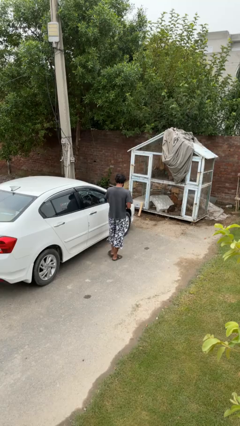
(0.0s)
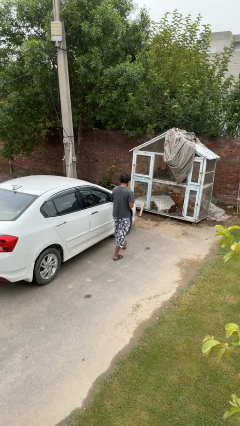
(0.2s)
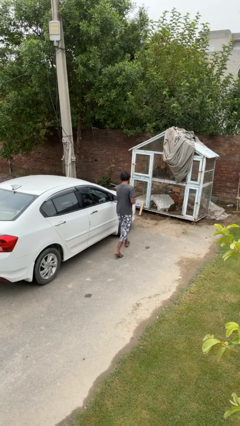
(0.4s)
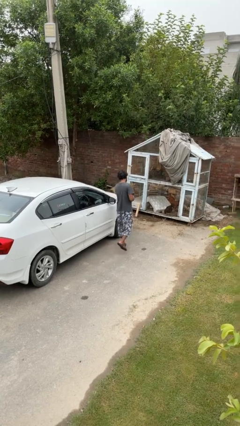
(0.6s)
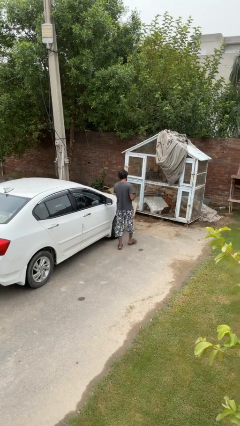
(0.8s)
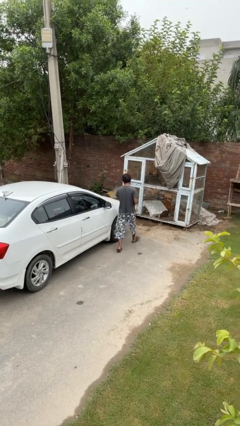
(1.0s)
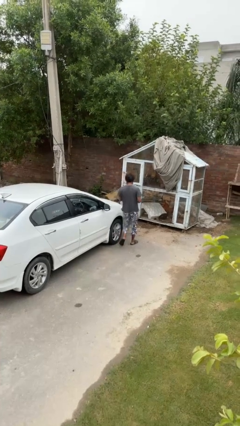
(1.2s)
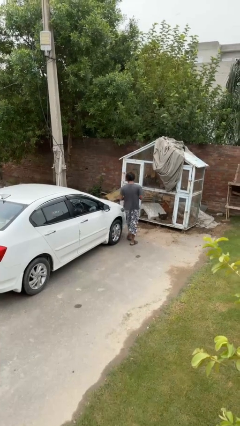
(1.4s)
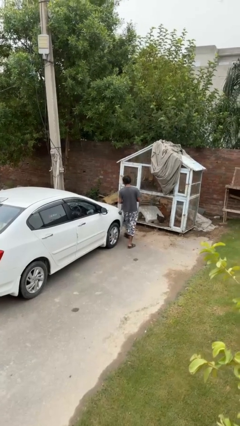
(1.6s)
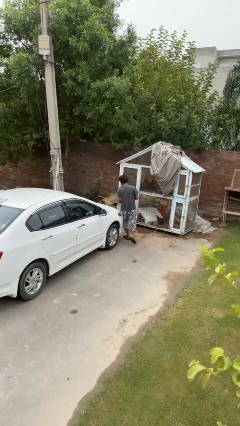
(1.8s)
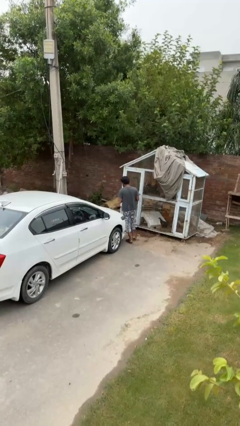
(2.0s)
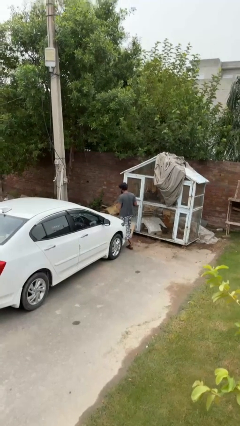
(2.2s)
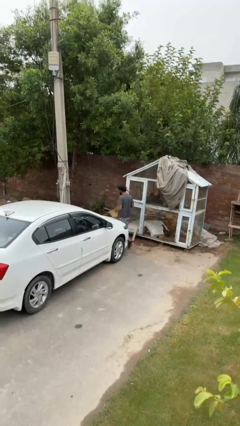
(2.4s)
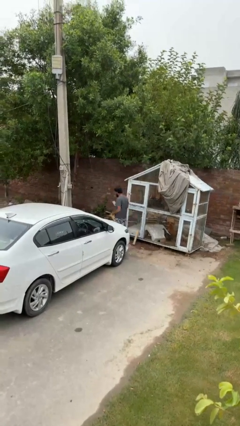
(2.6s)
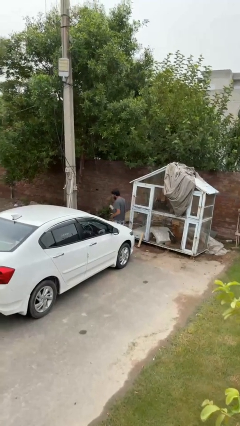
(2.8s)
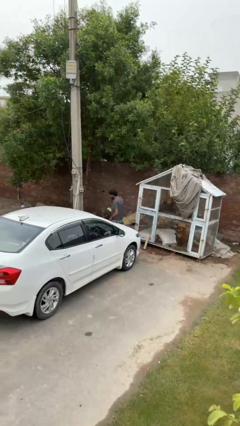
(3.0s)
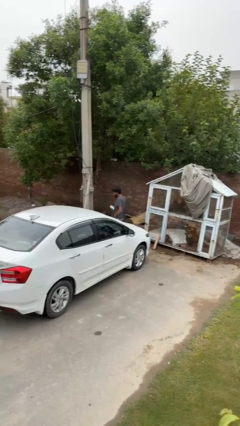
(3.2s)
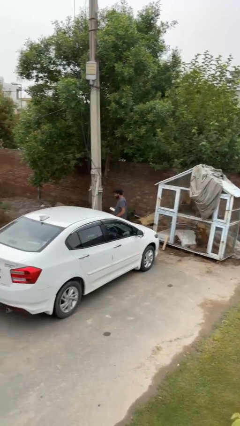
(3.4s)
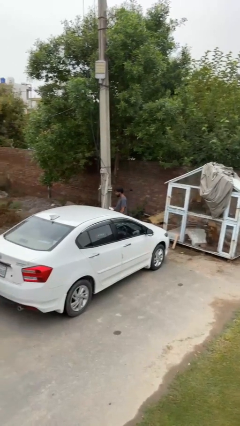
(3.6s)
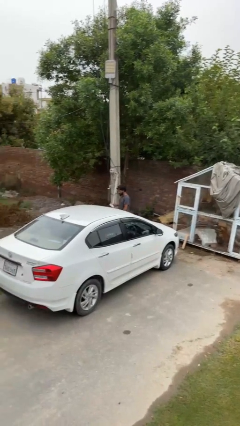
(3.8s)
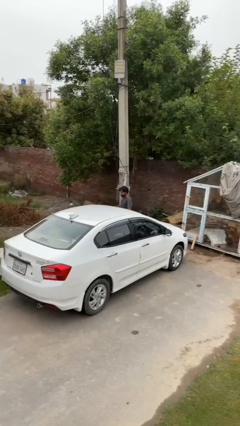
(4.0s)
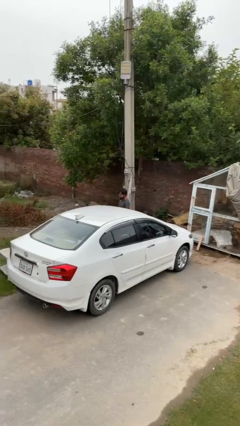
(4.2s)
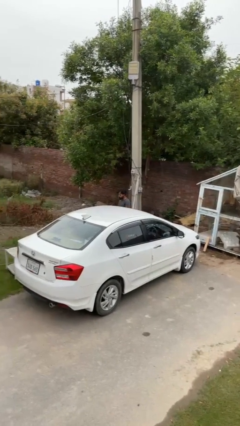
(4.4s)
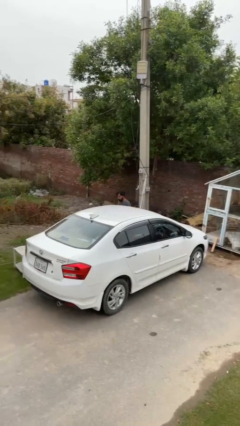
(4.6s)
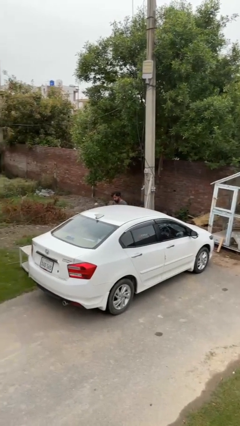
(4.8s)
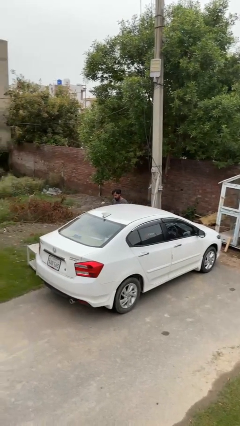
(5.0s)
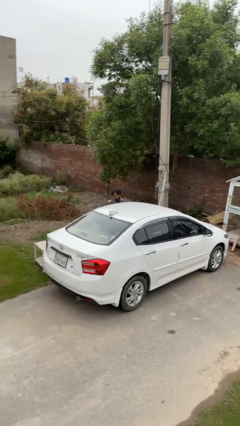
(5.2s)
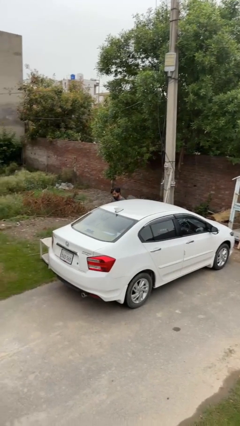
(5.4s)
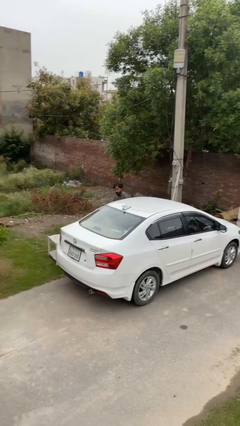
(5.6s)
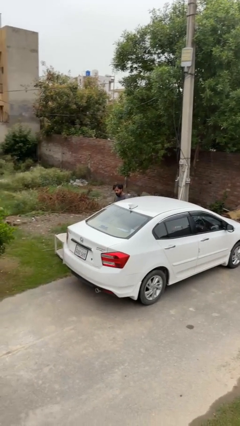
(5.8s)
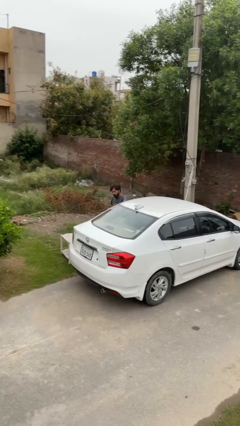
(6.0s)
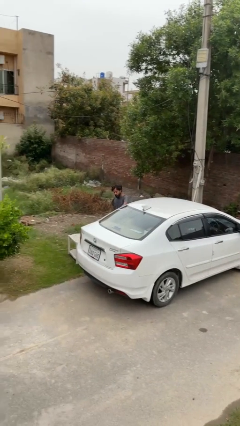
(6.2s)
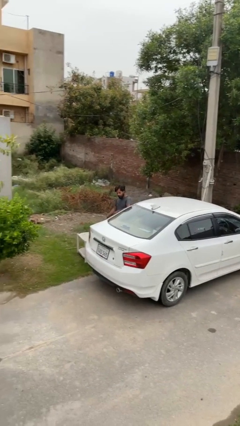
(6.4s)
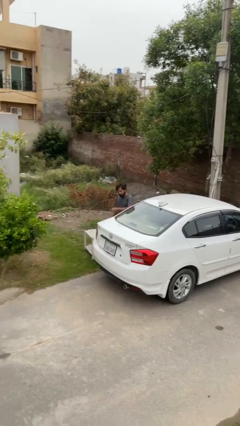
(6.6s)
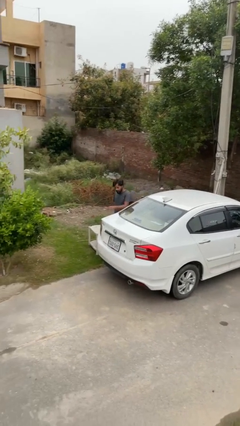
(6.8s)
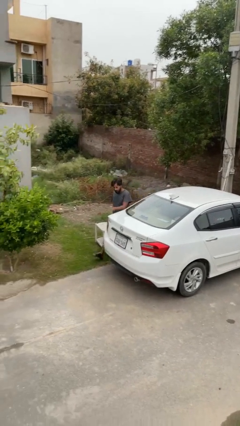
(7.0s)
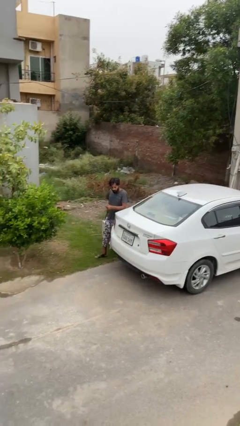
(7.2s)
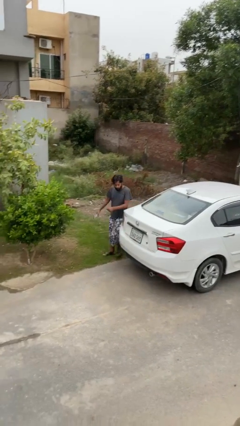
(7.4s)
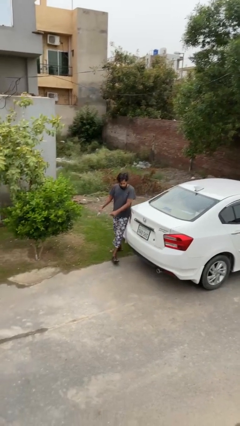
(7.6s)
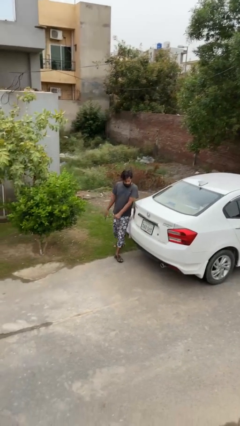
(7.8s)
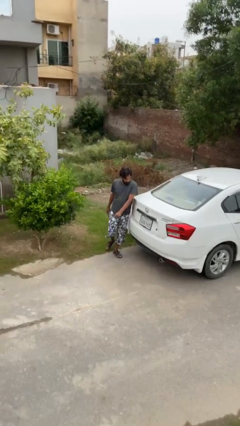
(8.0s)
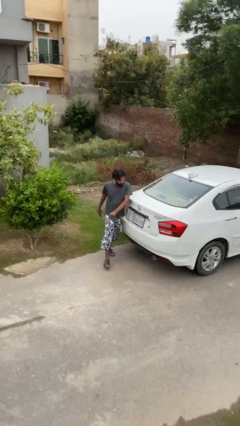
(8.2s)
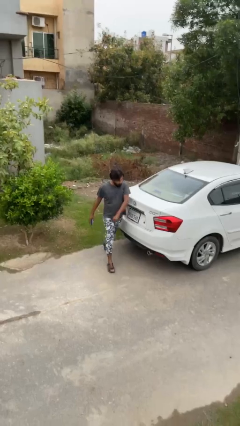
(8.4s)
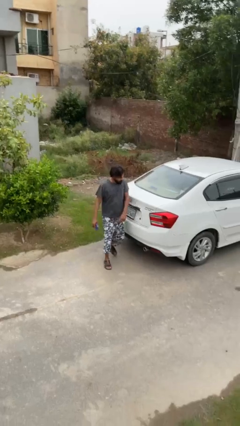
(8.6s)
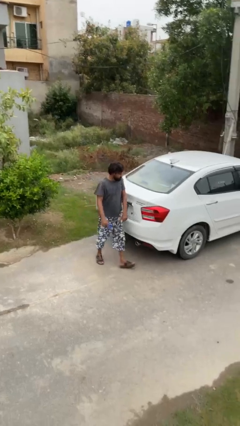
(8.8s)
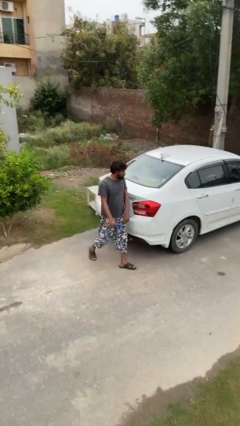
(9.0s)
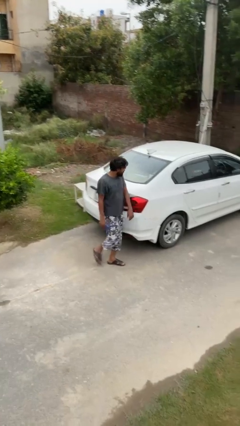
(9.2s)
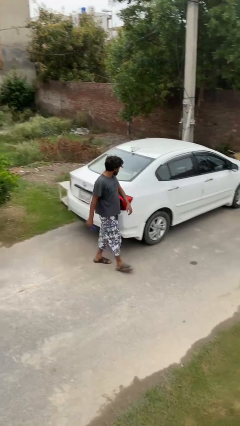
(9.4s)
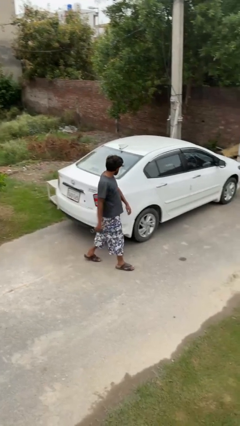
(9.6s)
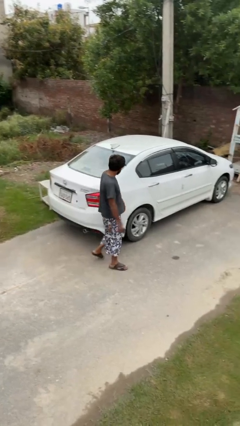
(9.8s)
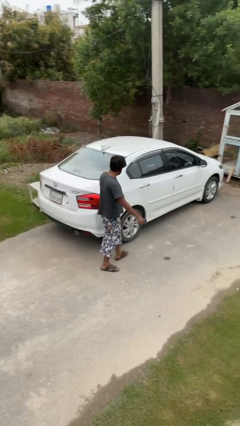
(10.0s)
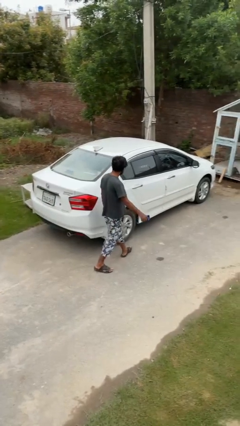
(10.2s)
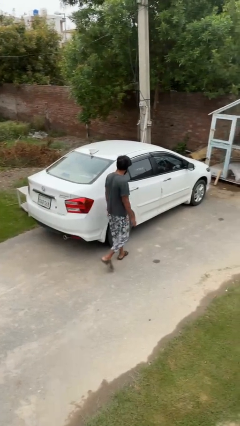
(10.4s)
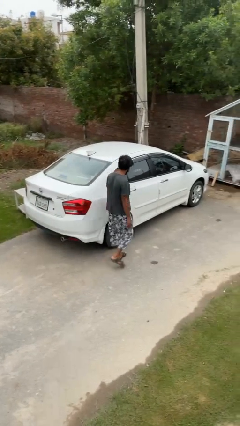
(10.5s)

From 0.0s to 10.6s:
person walks around car

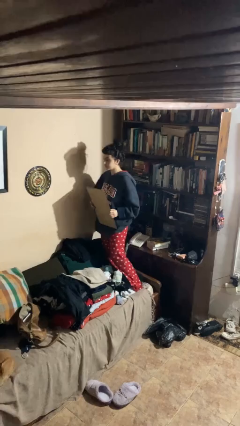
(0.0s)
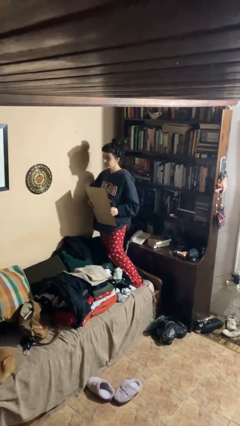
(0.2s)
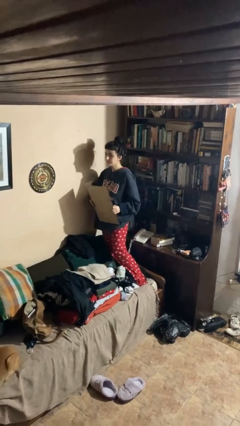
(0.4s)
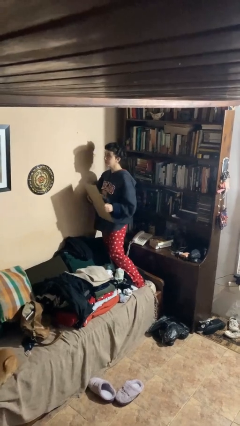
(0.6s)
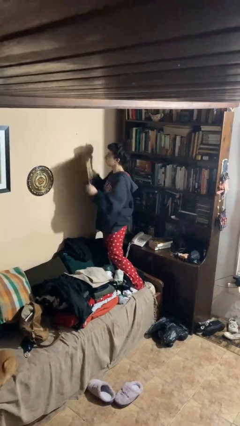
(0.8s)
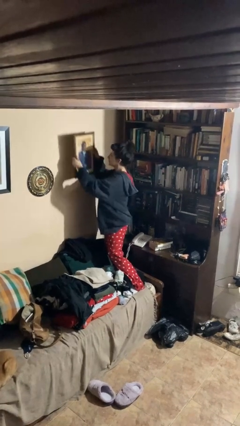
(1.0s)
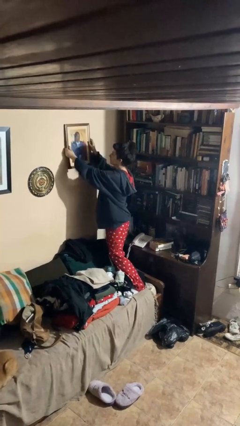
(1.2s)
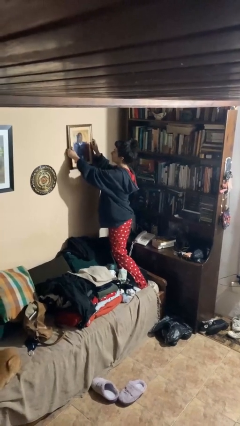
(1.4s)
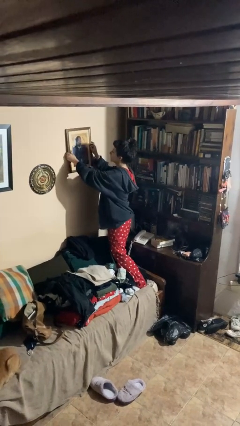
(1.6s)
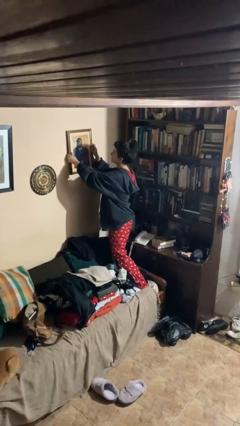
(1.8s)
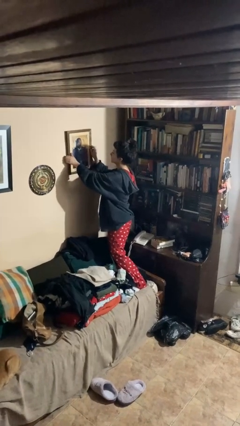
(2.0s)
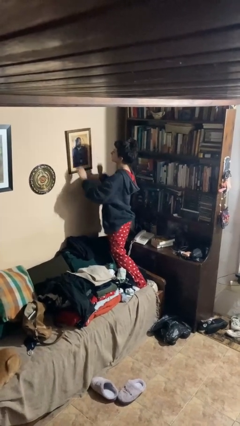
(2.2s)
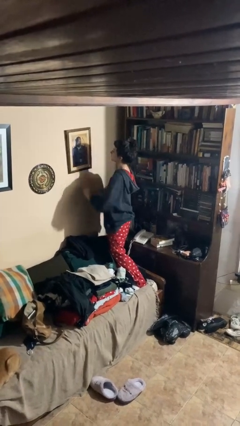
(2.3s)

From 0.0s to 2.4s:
person puts up picture frame

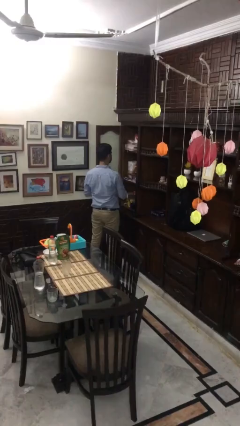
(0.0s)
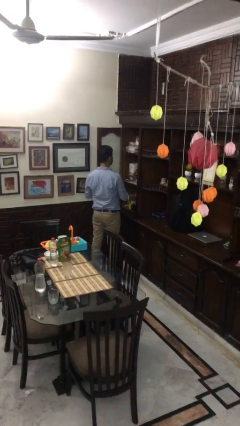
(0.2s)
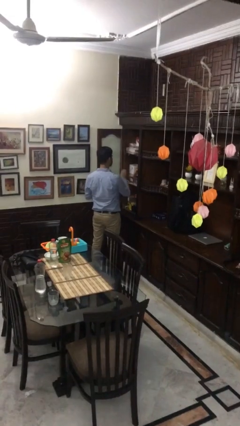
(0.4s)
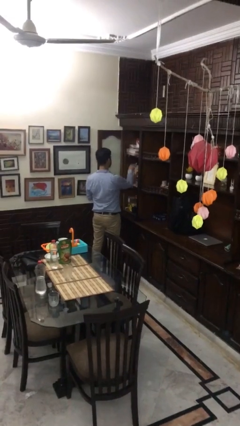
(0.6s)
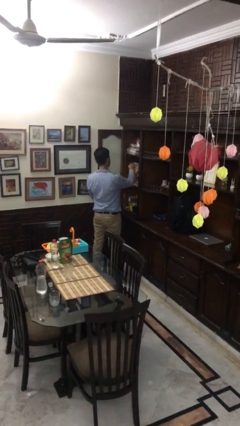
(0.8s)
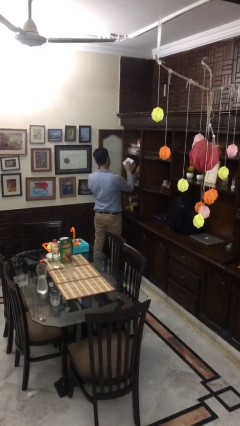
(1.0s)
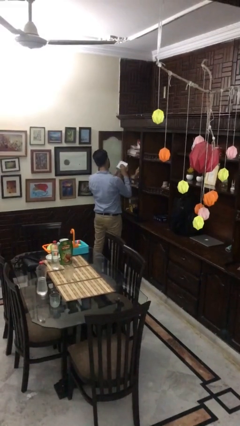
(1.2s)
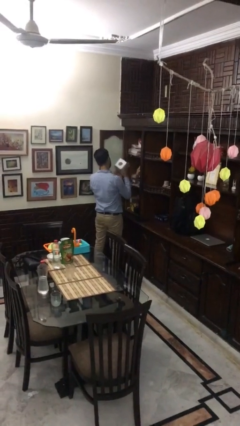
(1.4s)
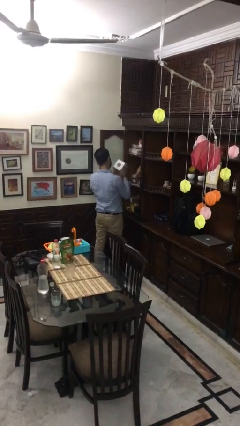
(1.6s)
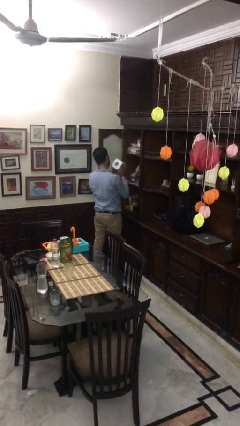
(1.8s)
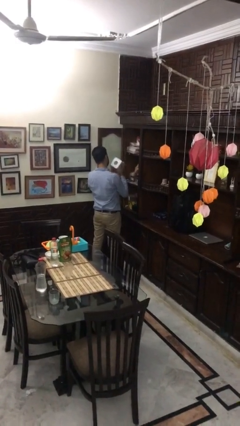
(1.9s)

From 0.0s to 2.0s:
person picks up object from cabinet

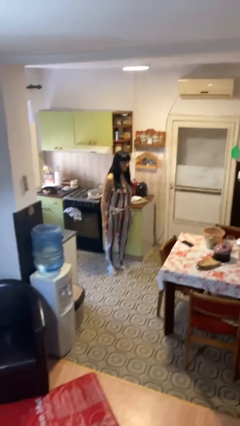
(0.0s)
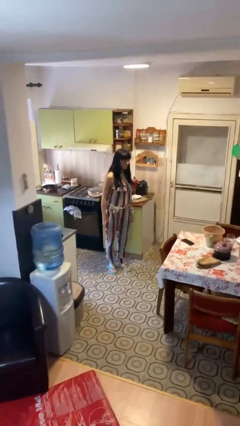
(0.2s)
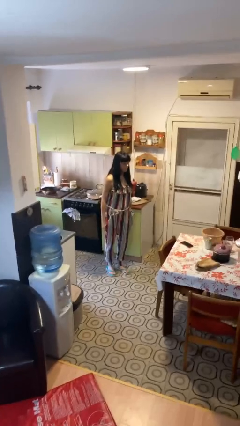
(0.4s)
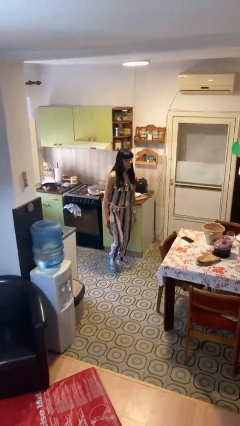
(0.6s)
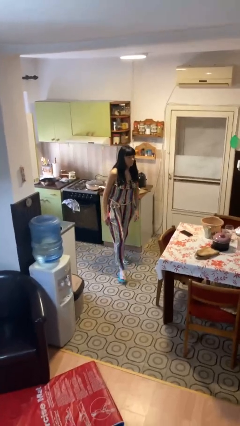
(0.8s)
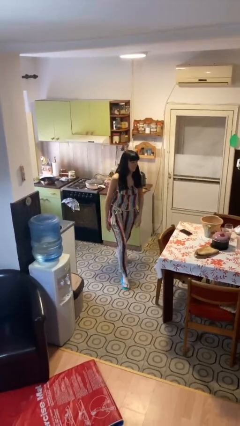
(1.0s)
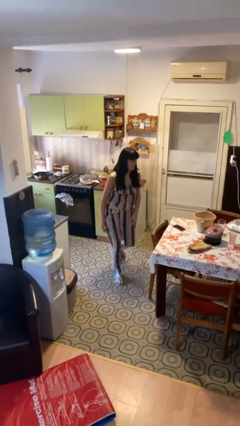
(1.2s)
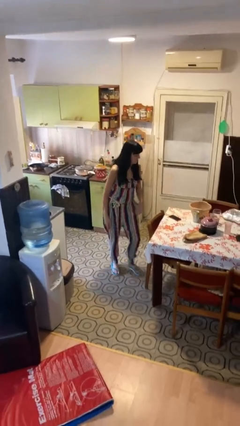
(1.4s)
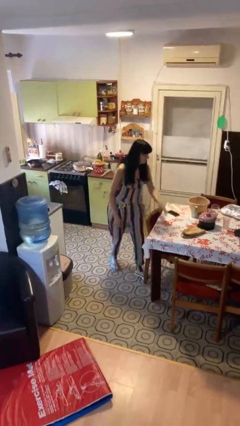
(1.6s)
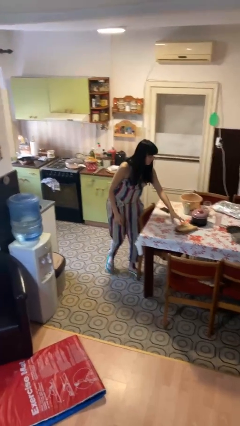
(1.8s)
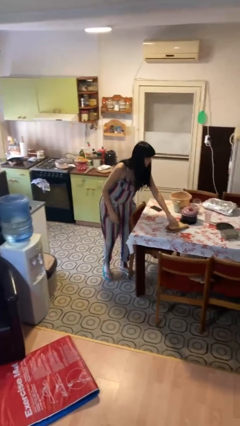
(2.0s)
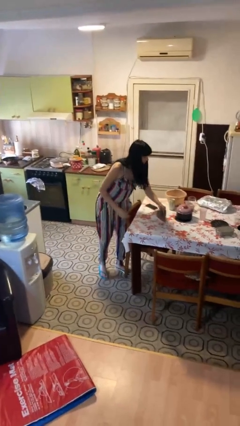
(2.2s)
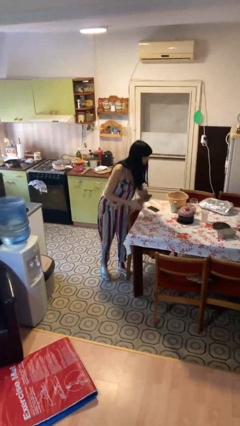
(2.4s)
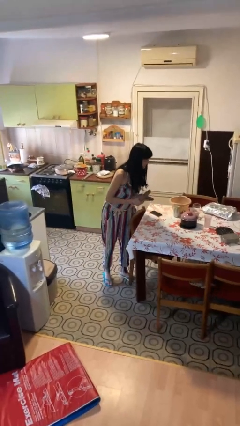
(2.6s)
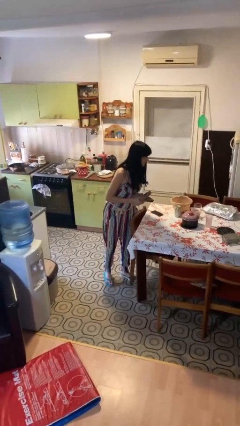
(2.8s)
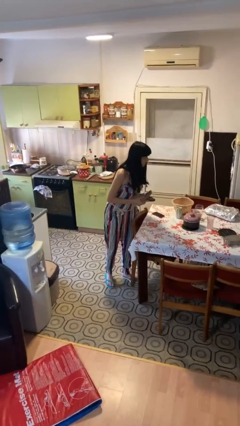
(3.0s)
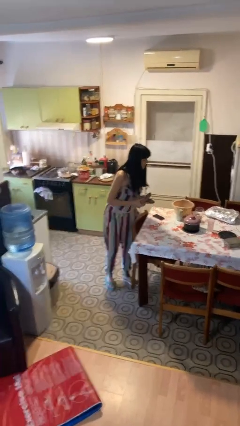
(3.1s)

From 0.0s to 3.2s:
person picks up object from table
